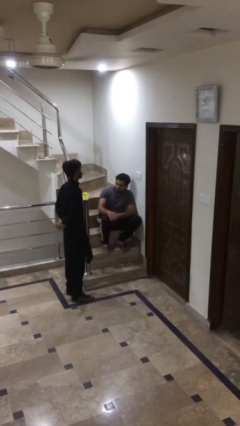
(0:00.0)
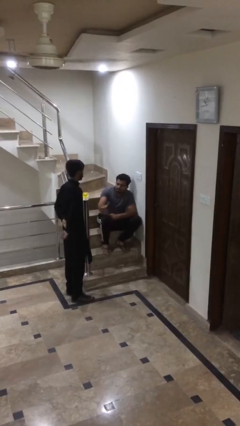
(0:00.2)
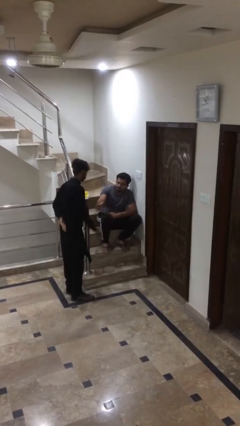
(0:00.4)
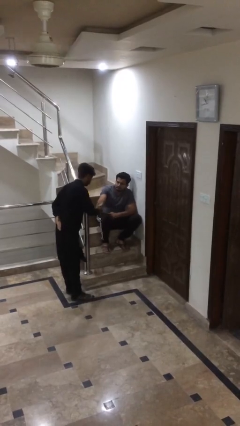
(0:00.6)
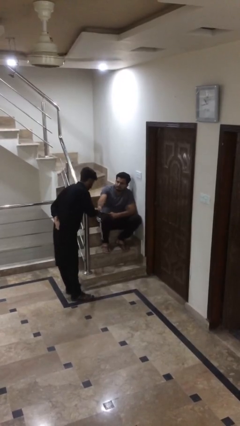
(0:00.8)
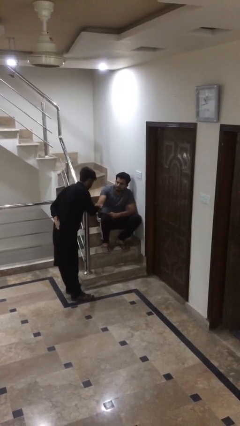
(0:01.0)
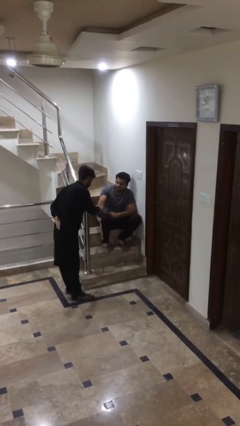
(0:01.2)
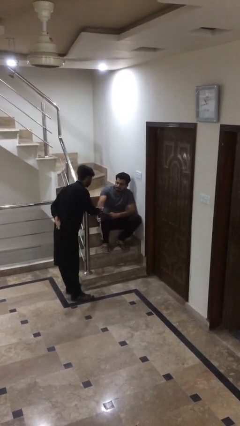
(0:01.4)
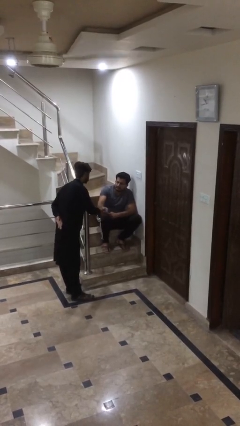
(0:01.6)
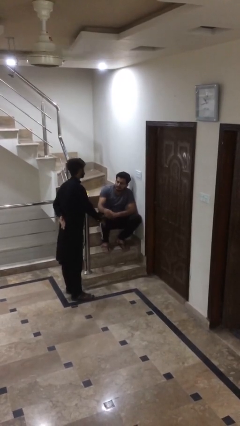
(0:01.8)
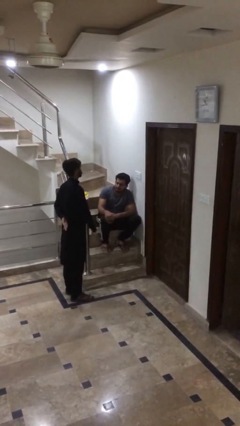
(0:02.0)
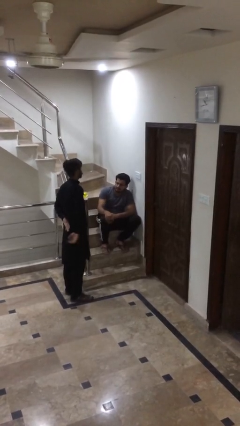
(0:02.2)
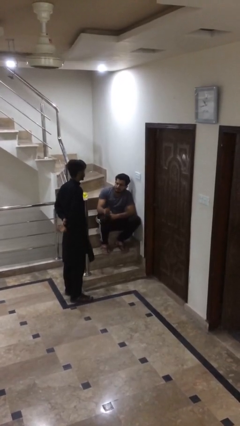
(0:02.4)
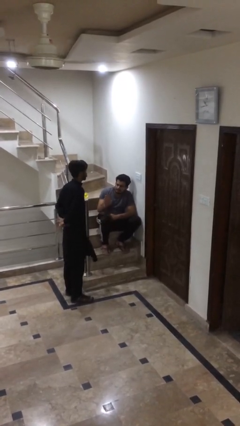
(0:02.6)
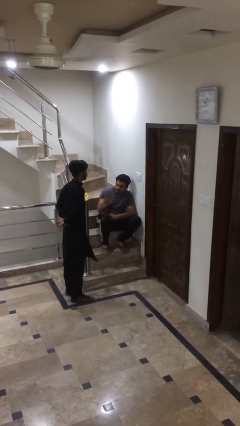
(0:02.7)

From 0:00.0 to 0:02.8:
person shakes hand

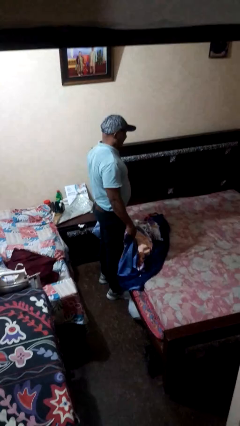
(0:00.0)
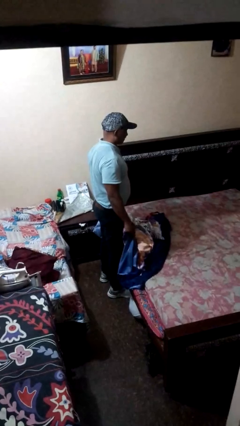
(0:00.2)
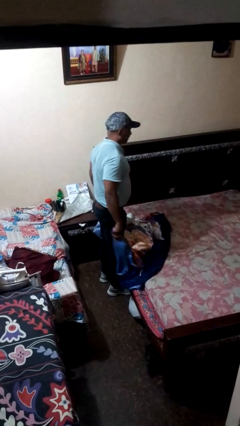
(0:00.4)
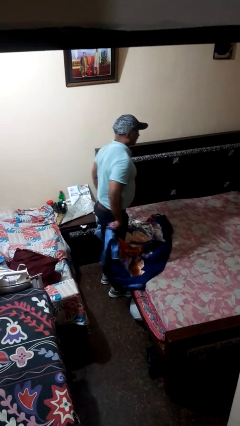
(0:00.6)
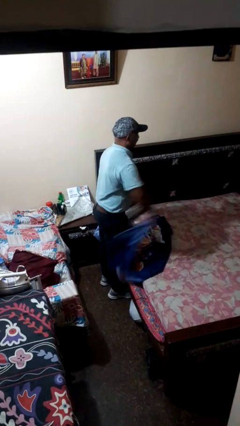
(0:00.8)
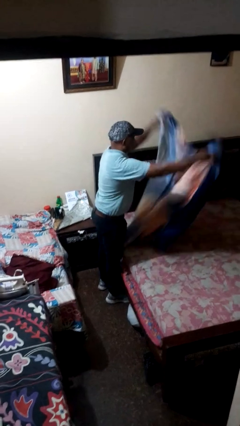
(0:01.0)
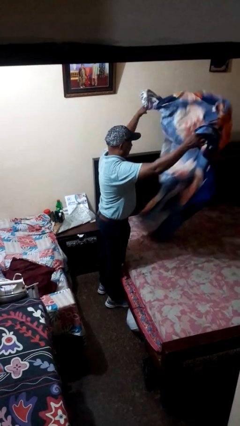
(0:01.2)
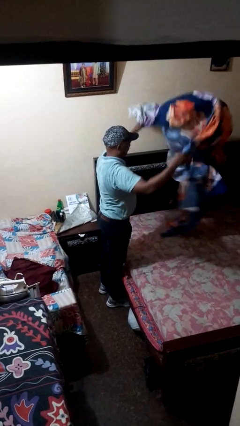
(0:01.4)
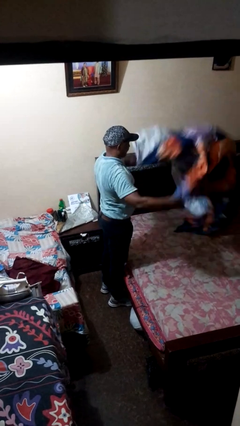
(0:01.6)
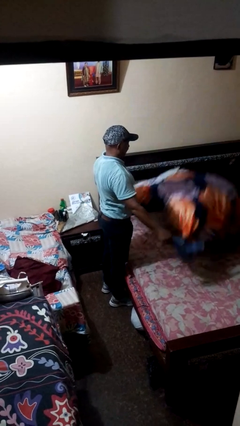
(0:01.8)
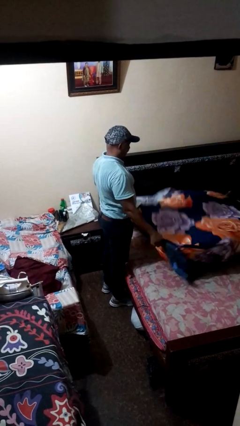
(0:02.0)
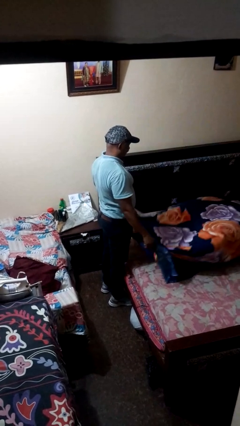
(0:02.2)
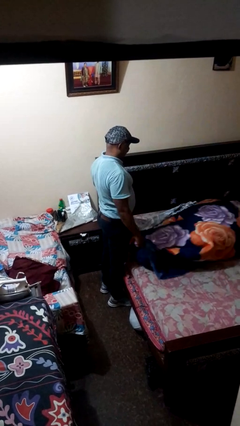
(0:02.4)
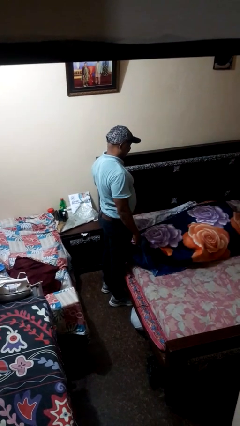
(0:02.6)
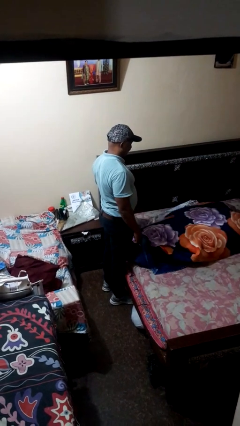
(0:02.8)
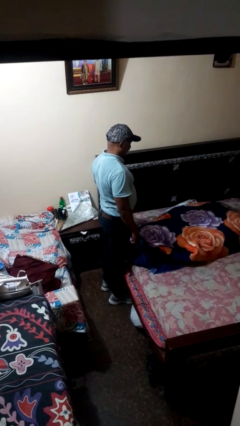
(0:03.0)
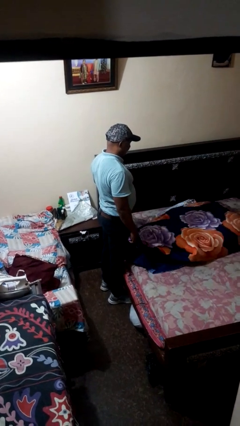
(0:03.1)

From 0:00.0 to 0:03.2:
person makes bed

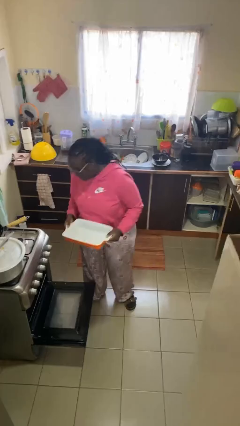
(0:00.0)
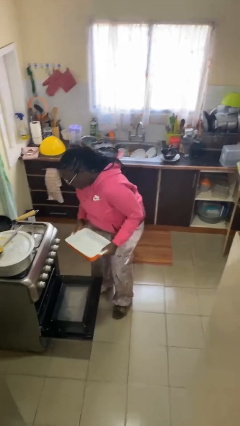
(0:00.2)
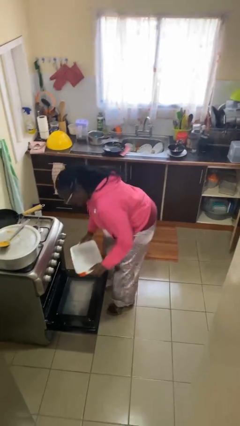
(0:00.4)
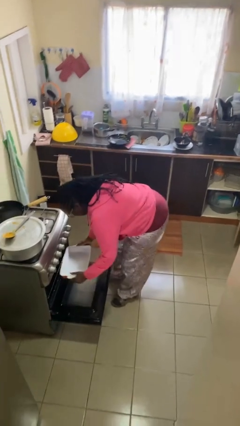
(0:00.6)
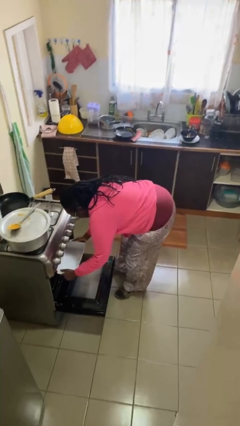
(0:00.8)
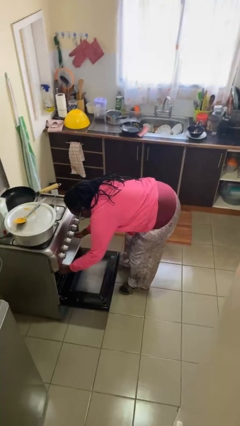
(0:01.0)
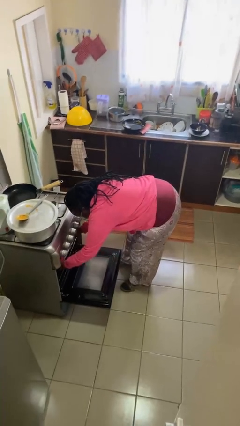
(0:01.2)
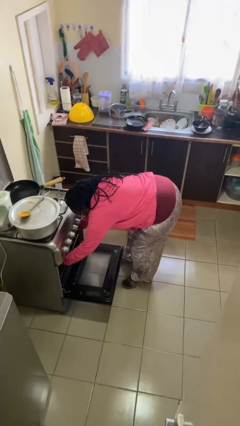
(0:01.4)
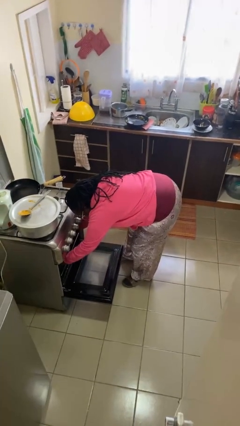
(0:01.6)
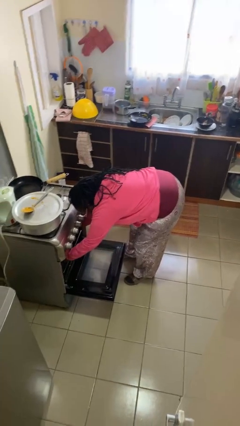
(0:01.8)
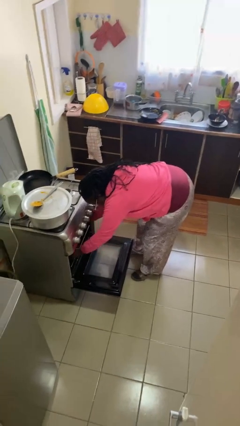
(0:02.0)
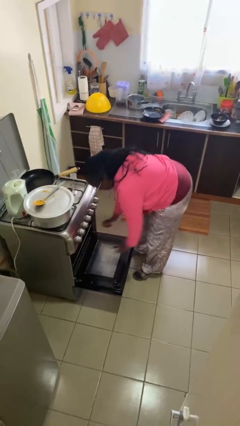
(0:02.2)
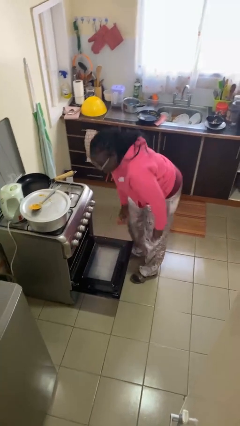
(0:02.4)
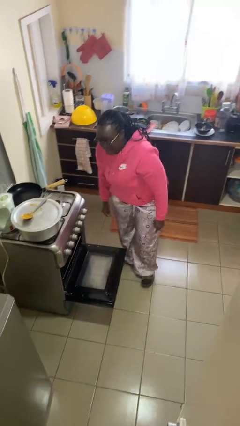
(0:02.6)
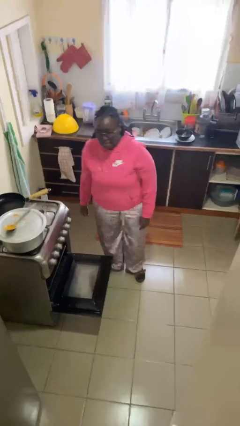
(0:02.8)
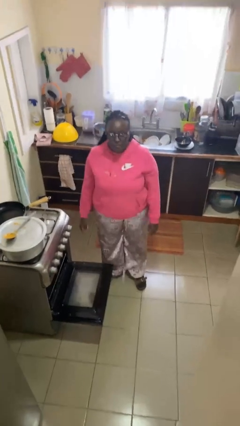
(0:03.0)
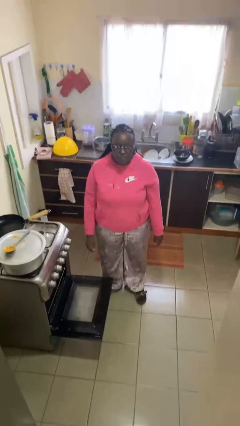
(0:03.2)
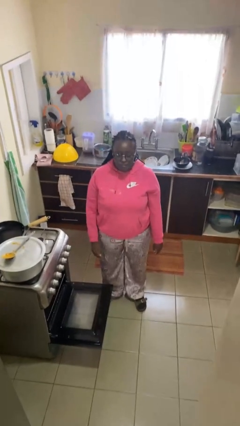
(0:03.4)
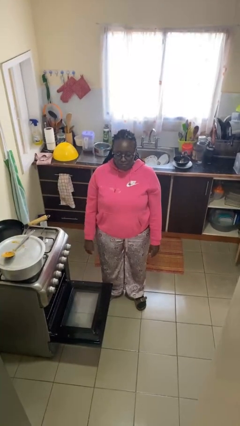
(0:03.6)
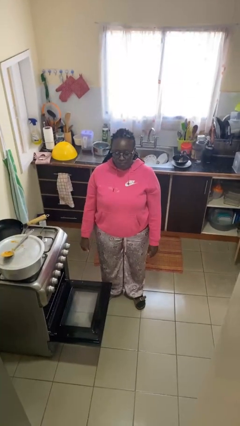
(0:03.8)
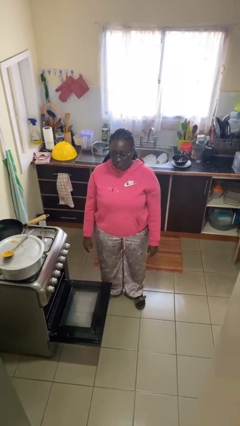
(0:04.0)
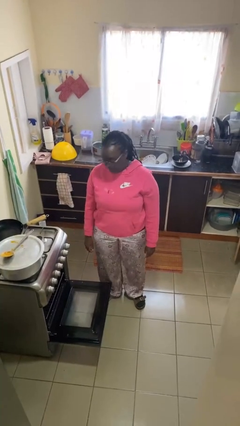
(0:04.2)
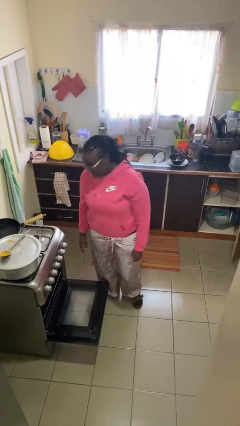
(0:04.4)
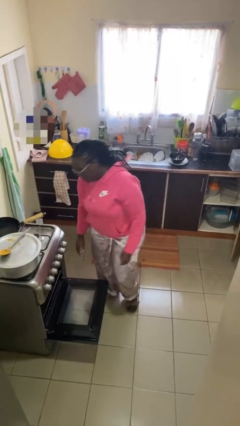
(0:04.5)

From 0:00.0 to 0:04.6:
person puts object into oven

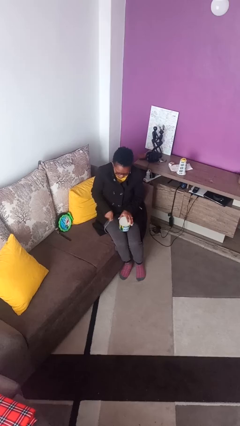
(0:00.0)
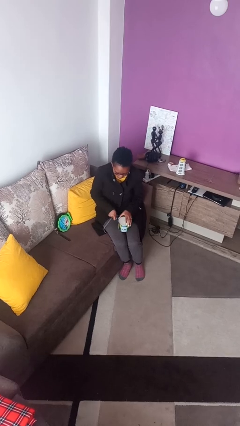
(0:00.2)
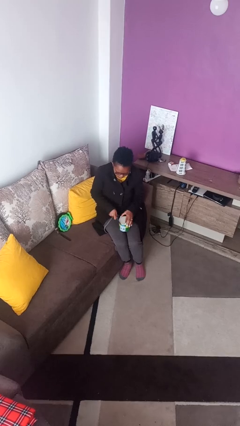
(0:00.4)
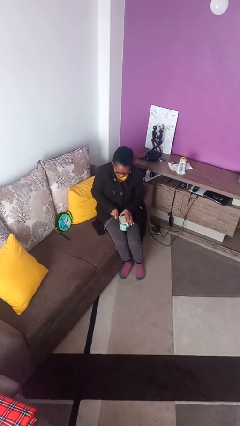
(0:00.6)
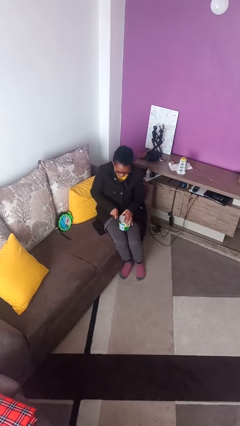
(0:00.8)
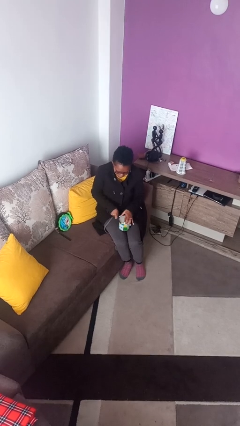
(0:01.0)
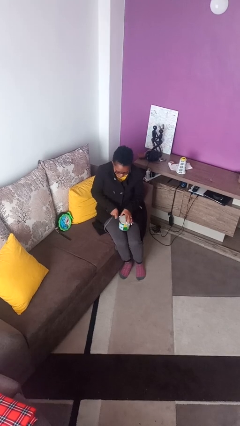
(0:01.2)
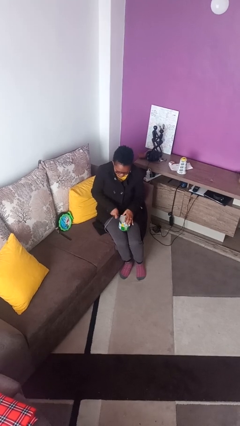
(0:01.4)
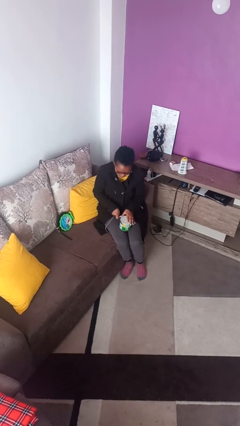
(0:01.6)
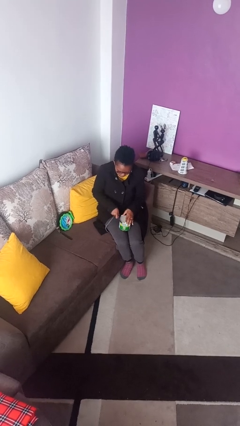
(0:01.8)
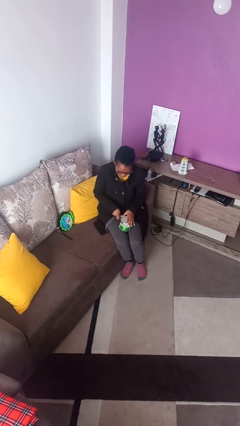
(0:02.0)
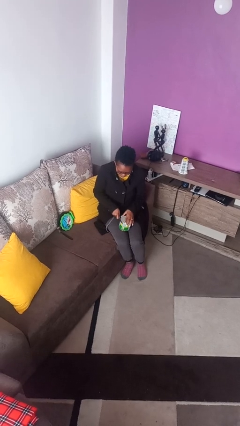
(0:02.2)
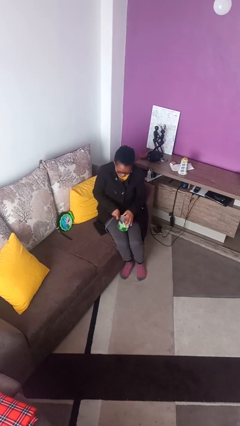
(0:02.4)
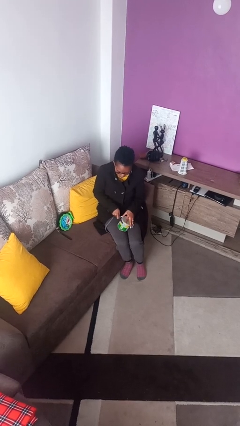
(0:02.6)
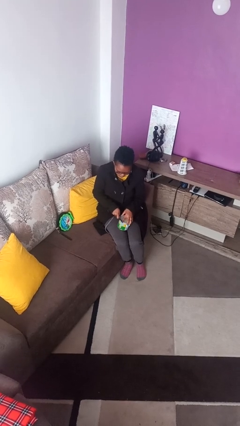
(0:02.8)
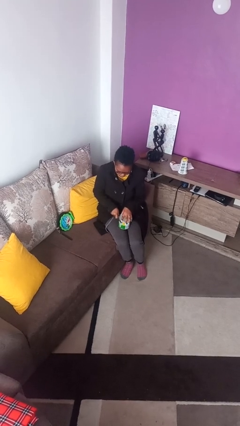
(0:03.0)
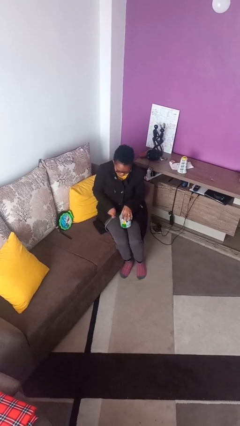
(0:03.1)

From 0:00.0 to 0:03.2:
person opens can with can opener

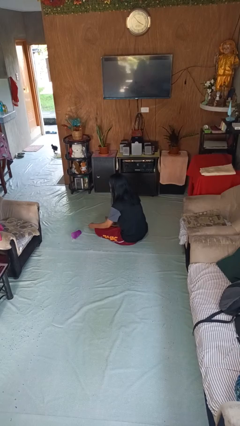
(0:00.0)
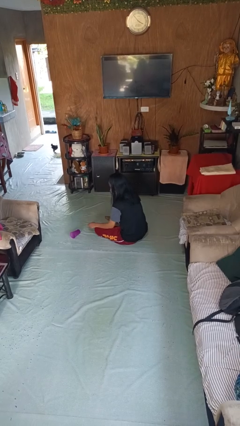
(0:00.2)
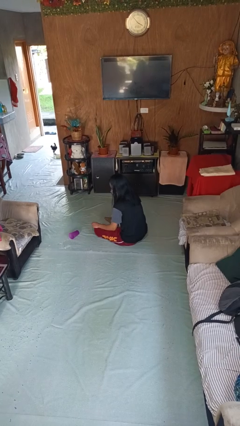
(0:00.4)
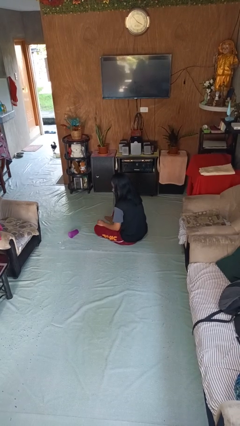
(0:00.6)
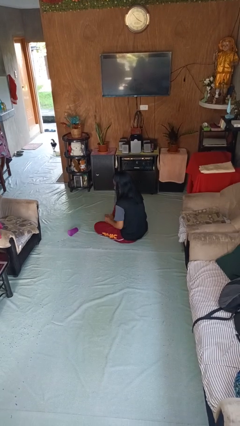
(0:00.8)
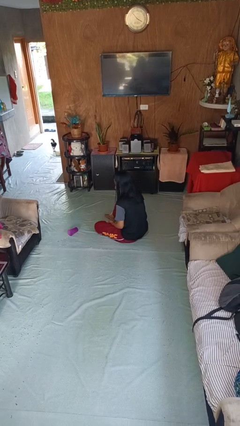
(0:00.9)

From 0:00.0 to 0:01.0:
person spills on floor

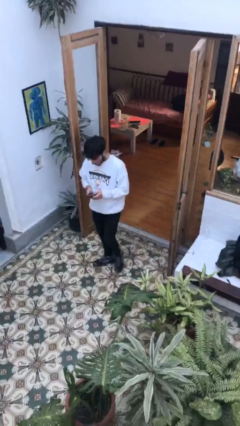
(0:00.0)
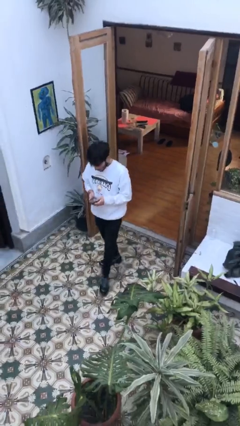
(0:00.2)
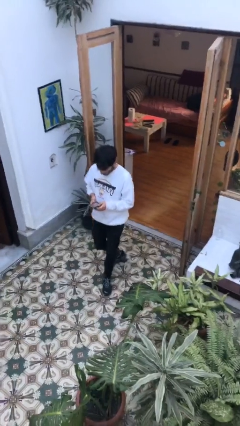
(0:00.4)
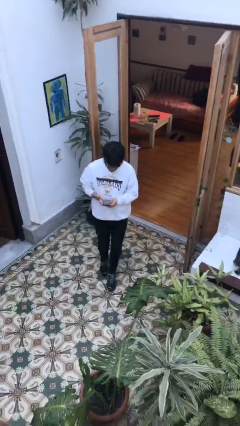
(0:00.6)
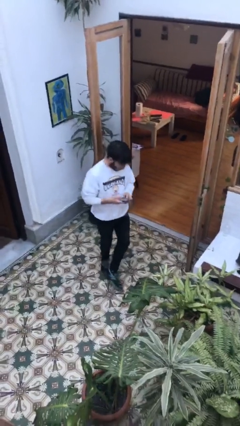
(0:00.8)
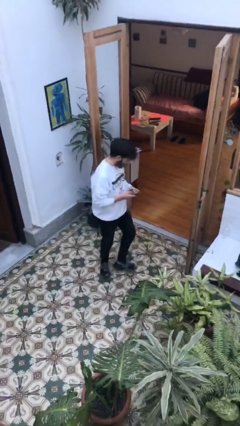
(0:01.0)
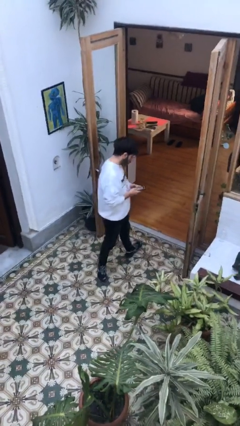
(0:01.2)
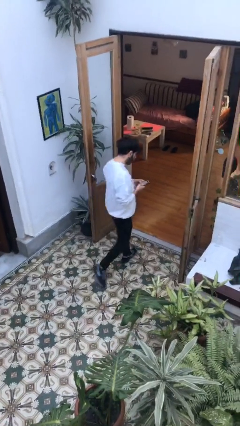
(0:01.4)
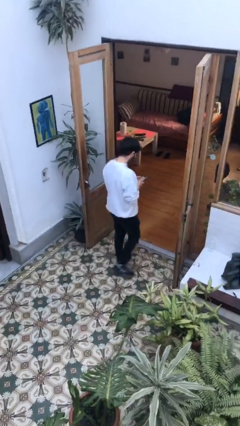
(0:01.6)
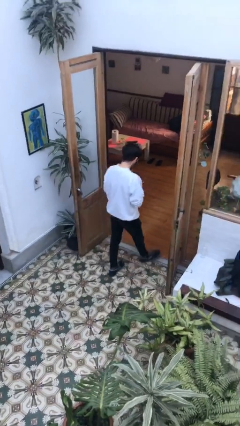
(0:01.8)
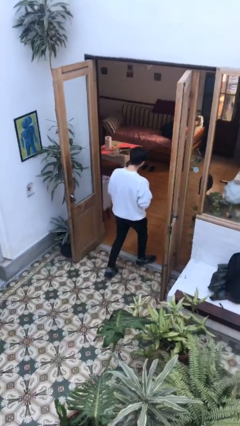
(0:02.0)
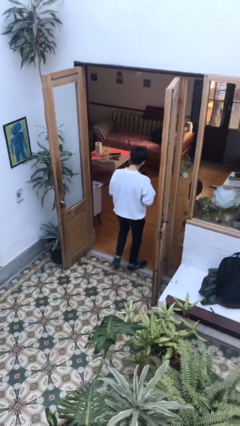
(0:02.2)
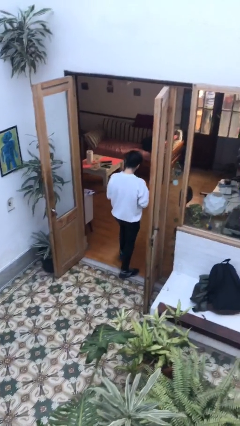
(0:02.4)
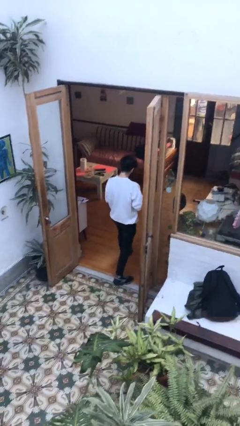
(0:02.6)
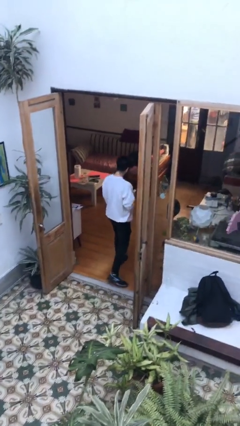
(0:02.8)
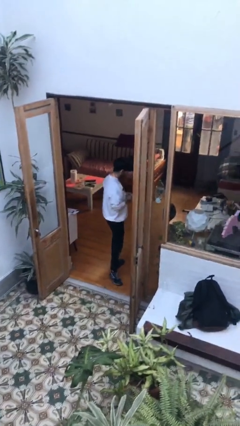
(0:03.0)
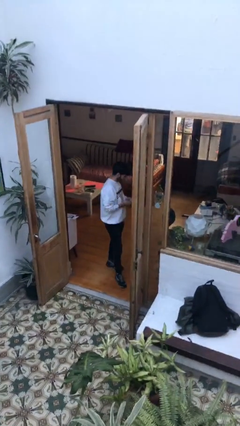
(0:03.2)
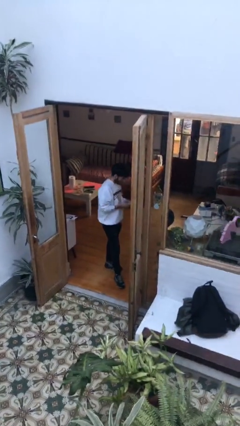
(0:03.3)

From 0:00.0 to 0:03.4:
person exits scene through structure
